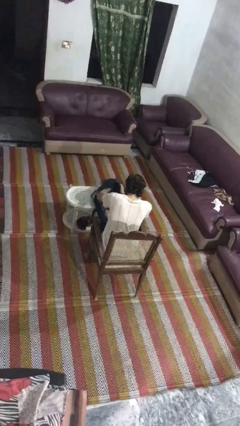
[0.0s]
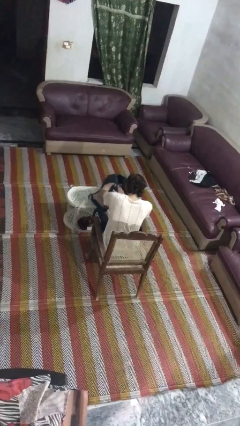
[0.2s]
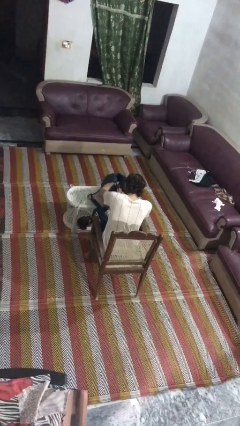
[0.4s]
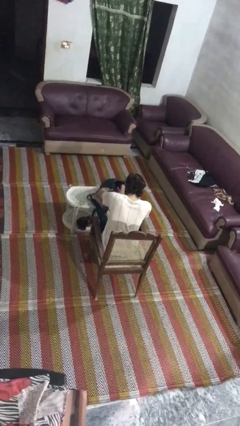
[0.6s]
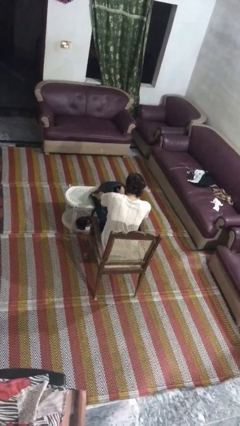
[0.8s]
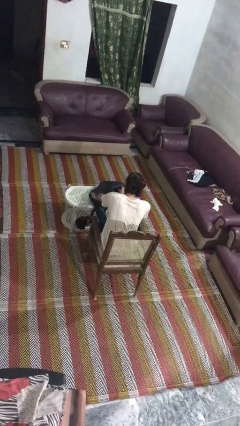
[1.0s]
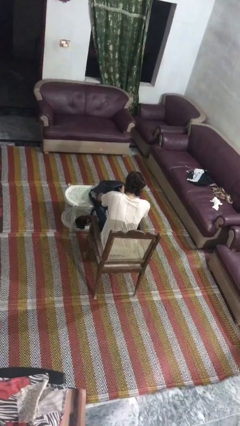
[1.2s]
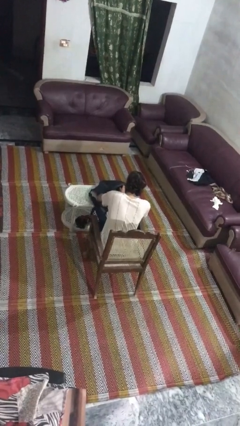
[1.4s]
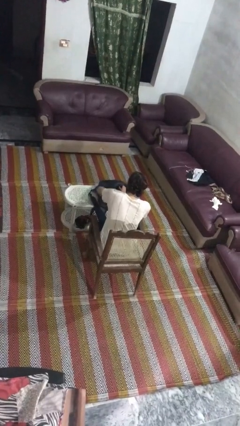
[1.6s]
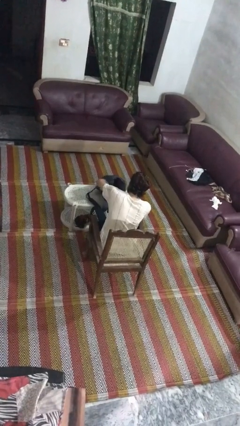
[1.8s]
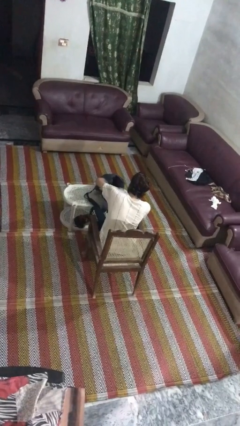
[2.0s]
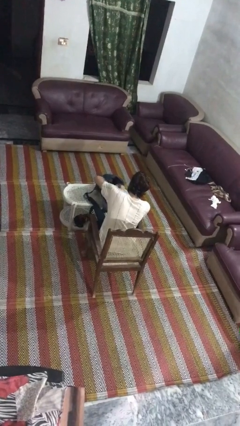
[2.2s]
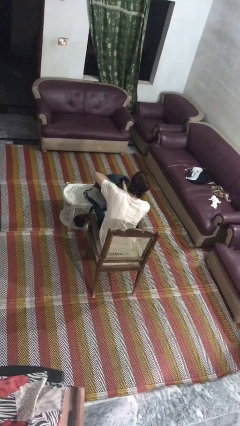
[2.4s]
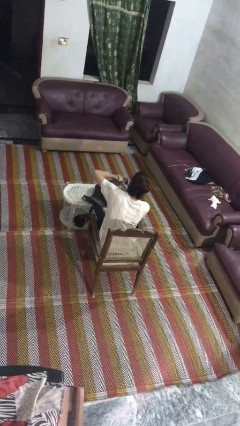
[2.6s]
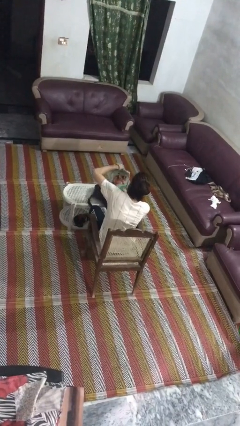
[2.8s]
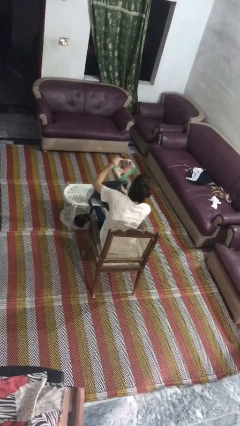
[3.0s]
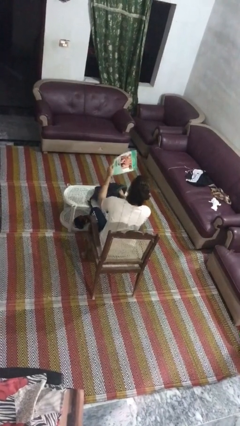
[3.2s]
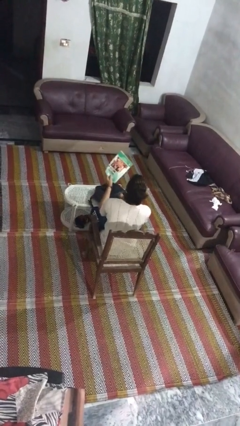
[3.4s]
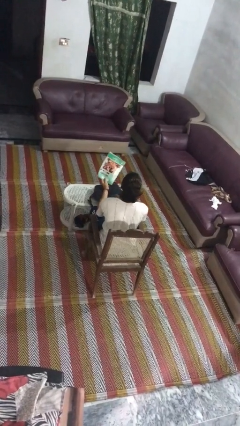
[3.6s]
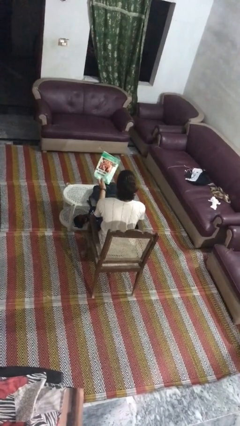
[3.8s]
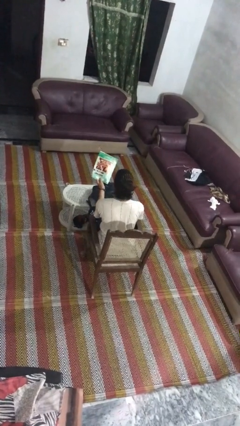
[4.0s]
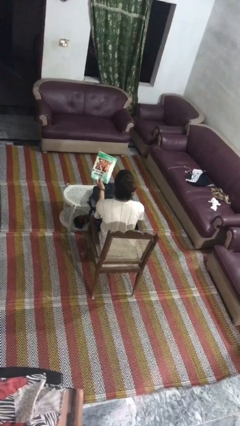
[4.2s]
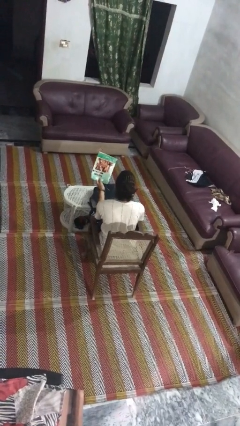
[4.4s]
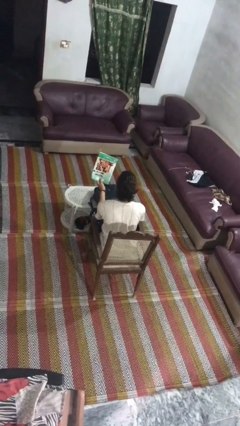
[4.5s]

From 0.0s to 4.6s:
person takes object from backpack

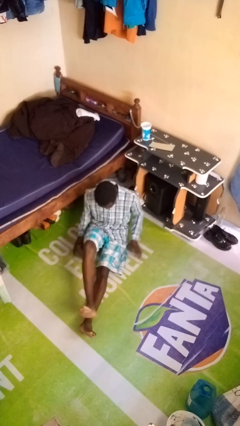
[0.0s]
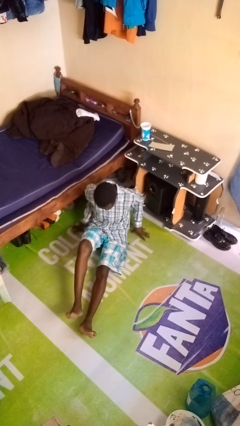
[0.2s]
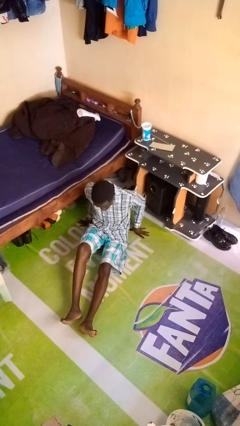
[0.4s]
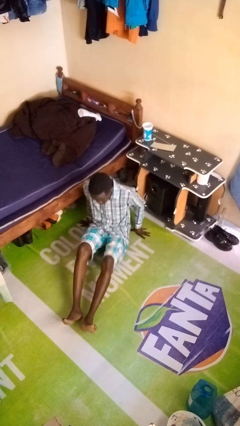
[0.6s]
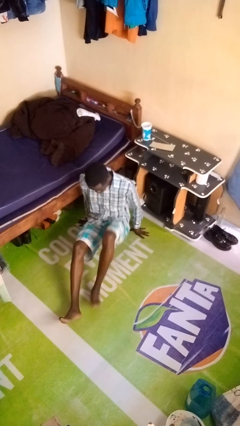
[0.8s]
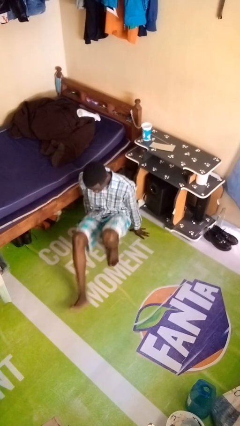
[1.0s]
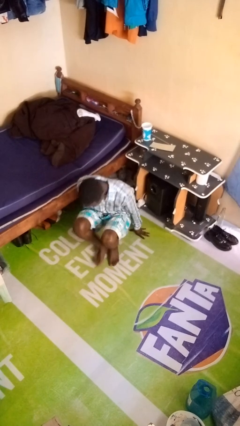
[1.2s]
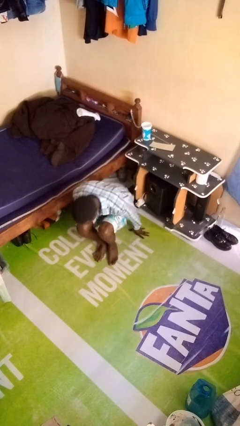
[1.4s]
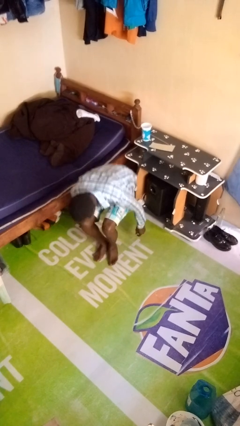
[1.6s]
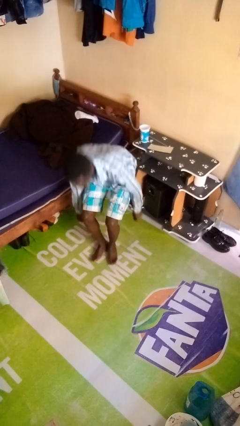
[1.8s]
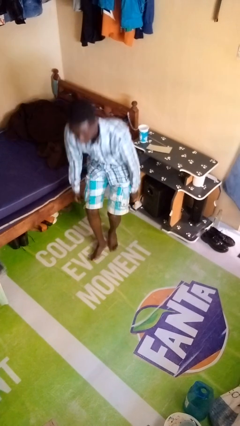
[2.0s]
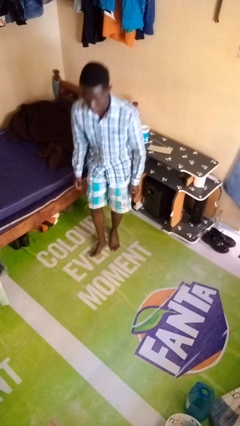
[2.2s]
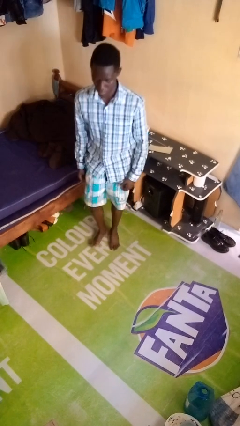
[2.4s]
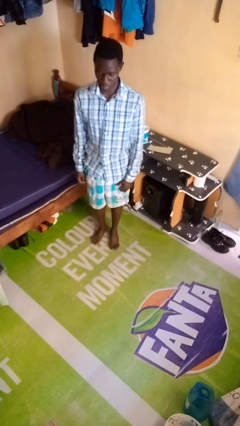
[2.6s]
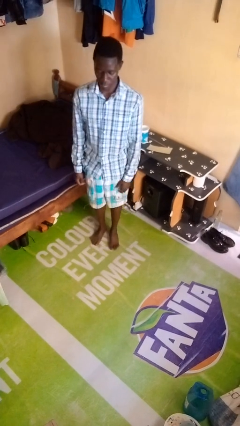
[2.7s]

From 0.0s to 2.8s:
person stands up from floor

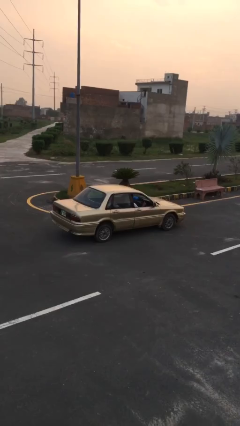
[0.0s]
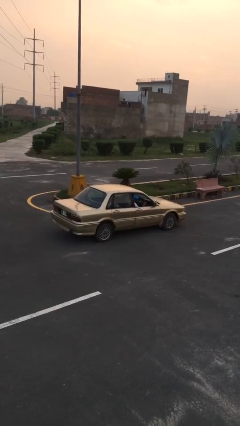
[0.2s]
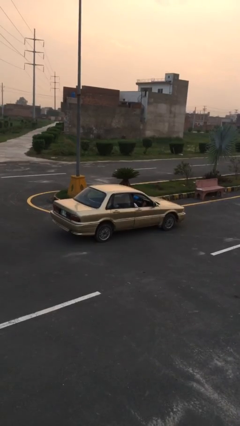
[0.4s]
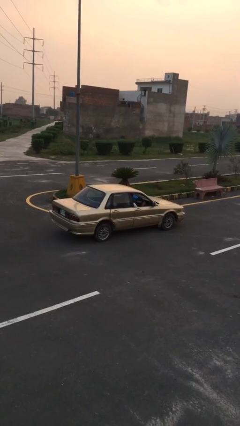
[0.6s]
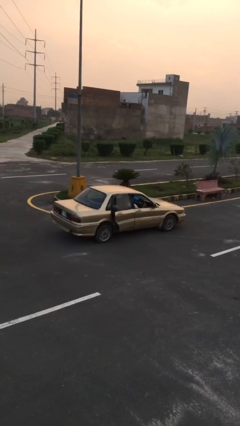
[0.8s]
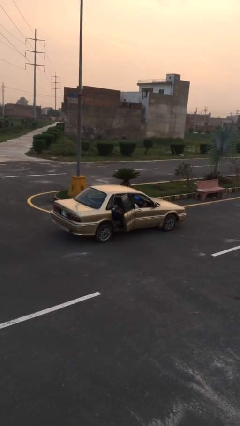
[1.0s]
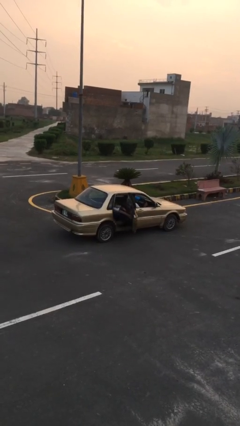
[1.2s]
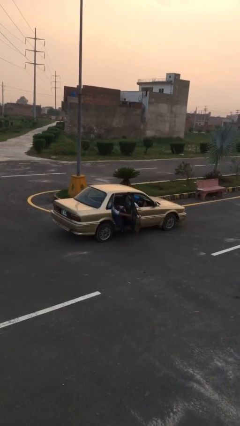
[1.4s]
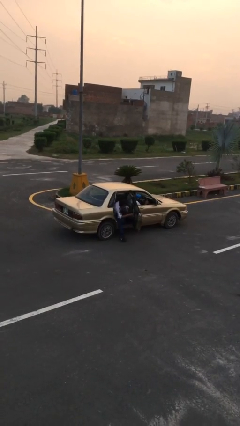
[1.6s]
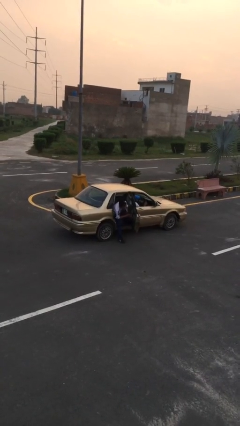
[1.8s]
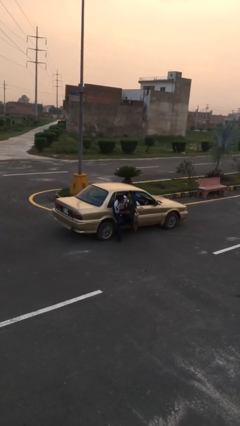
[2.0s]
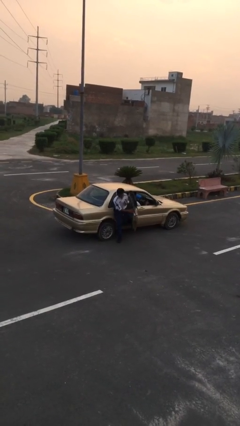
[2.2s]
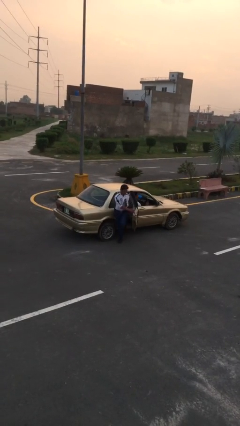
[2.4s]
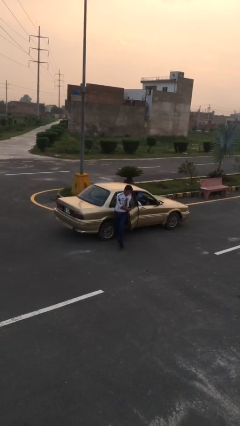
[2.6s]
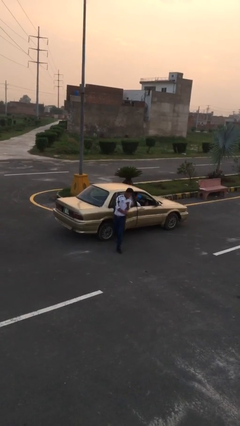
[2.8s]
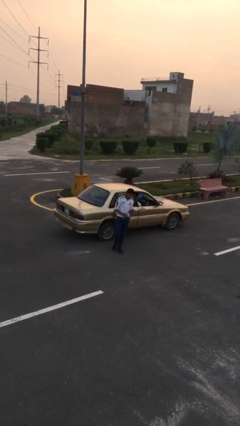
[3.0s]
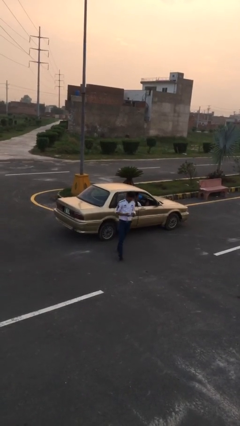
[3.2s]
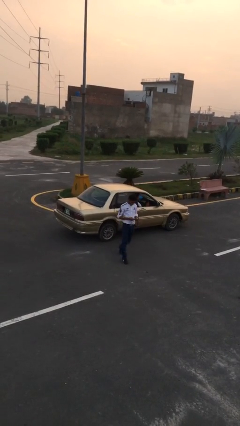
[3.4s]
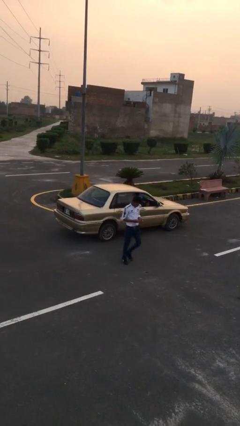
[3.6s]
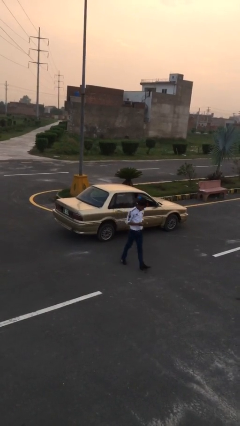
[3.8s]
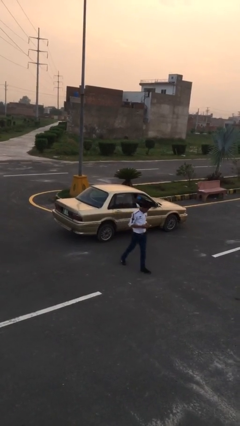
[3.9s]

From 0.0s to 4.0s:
car drops off person

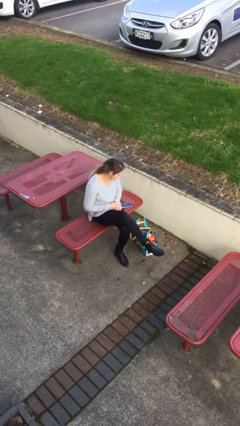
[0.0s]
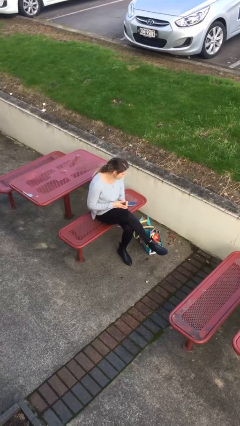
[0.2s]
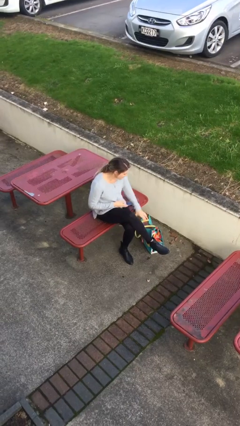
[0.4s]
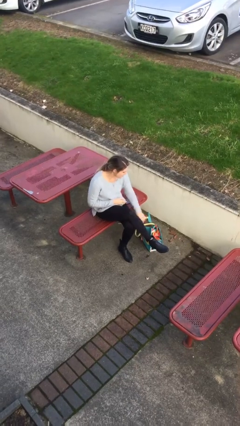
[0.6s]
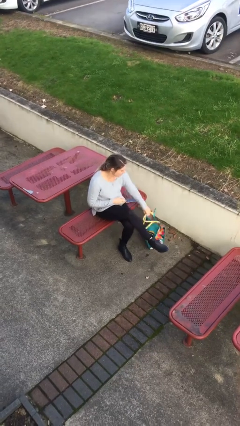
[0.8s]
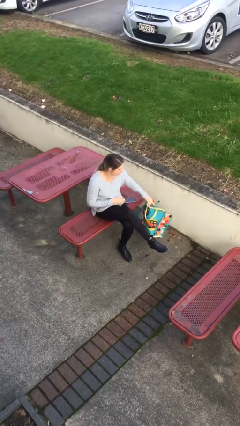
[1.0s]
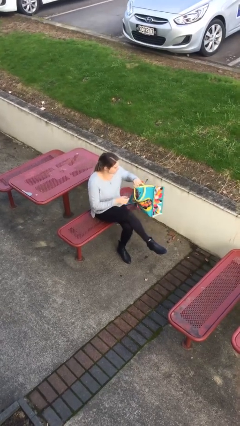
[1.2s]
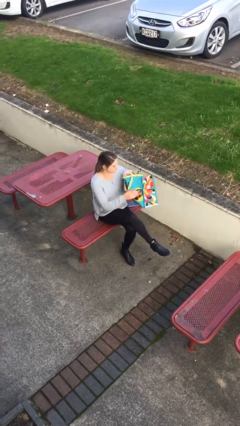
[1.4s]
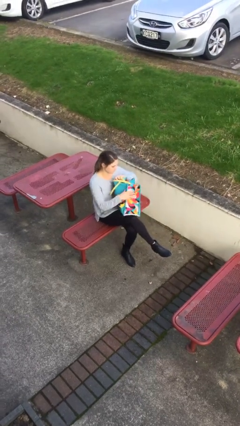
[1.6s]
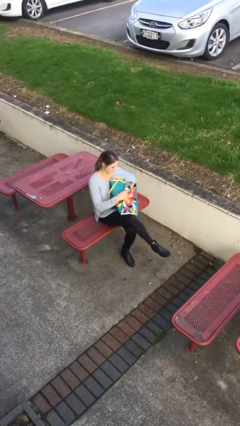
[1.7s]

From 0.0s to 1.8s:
person picks up object from floor

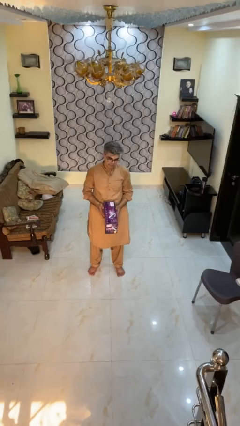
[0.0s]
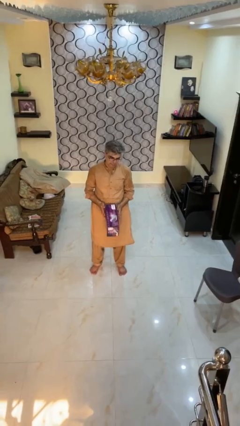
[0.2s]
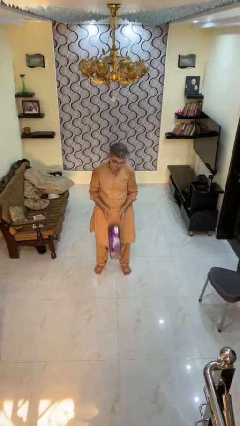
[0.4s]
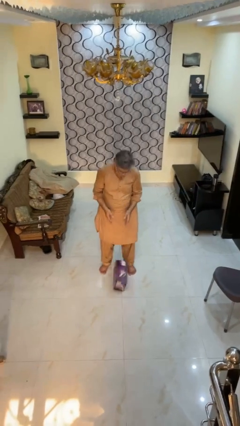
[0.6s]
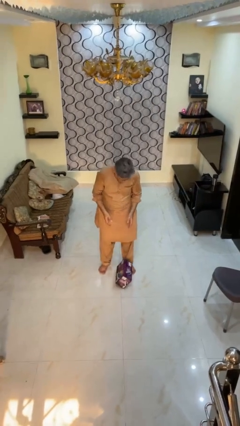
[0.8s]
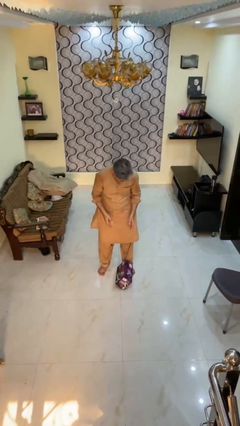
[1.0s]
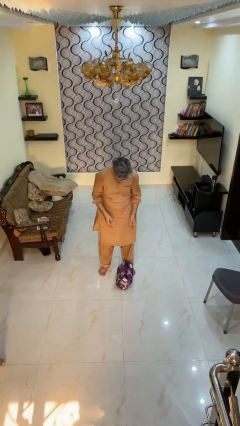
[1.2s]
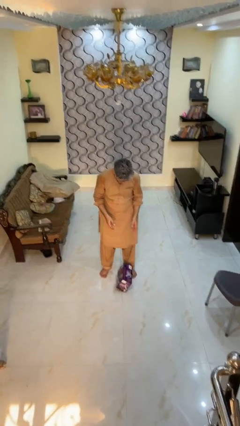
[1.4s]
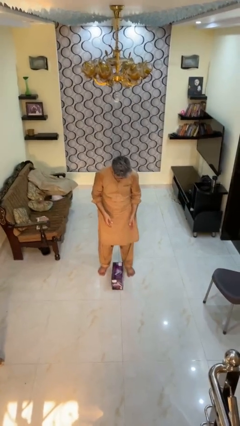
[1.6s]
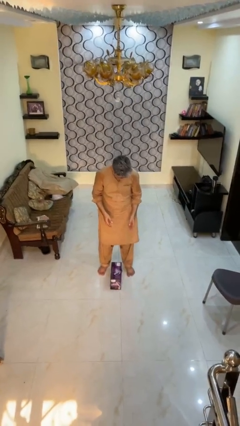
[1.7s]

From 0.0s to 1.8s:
person drops object

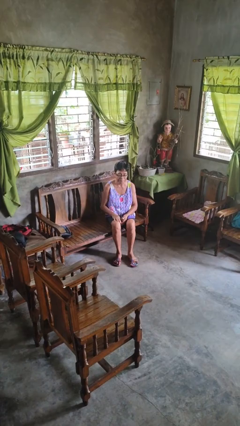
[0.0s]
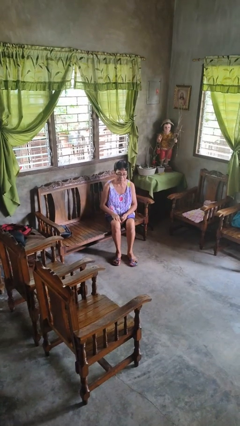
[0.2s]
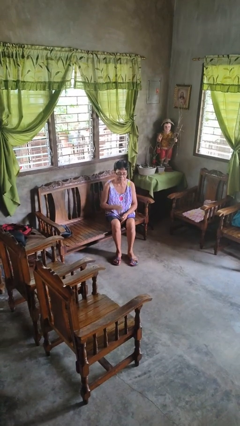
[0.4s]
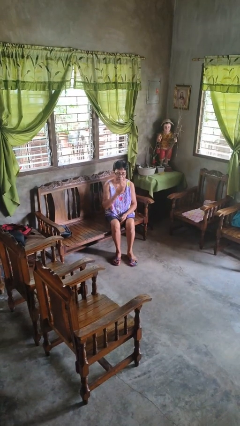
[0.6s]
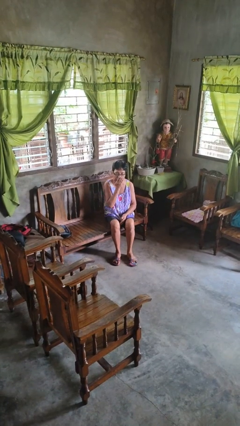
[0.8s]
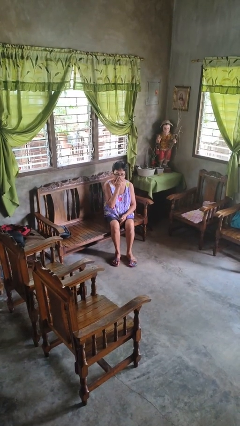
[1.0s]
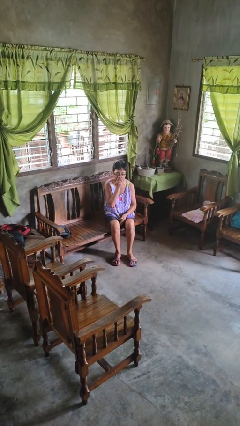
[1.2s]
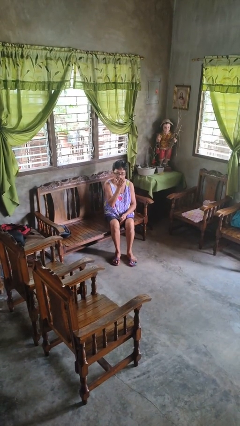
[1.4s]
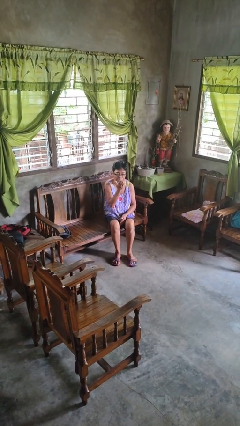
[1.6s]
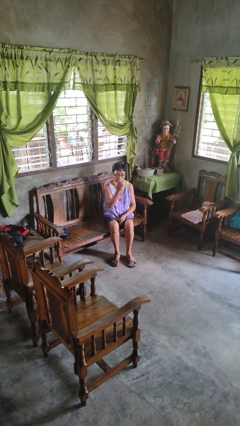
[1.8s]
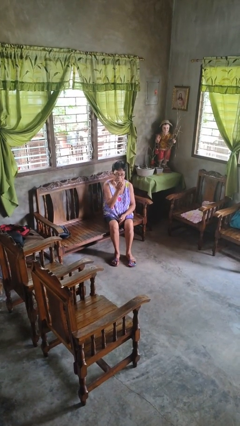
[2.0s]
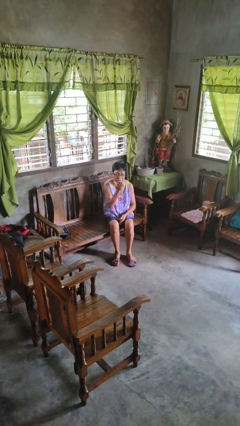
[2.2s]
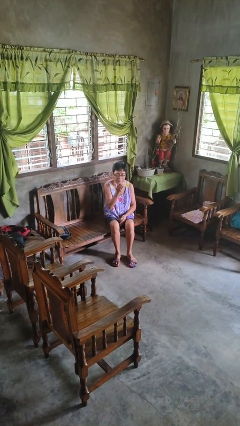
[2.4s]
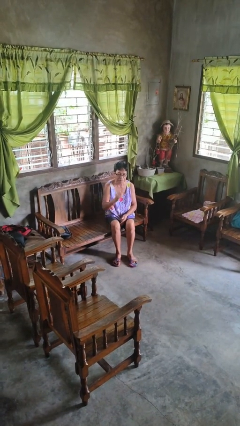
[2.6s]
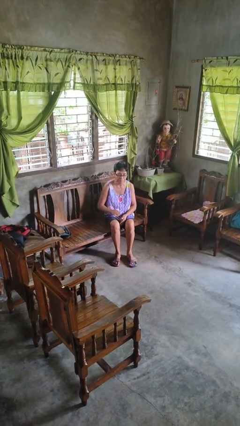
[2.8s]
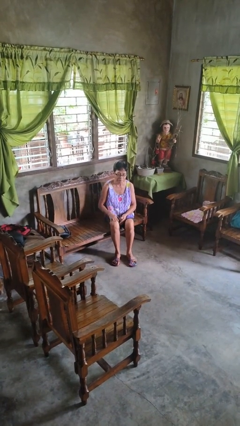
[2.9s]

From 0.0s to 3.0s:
person gestures blow kiss
